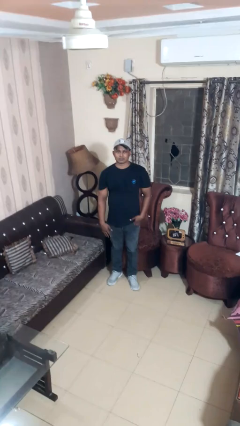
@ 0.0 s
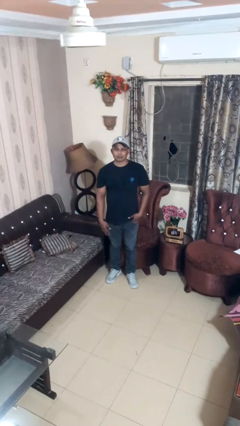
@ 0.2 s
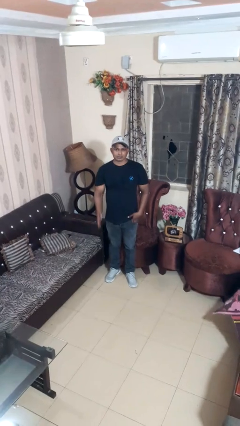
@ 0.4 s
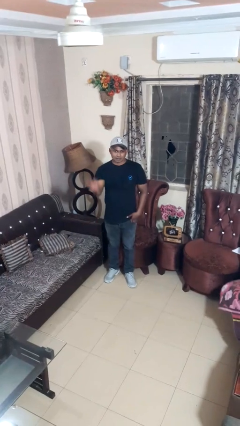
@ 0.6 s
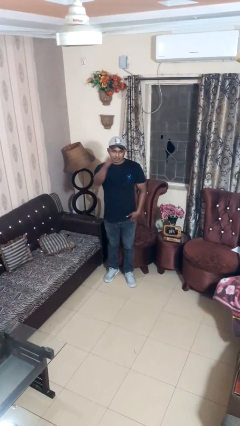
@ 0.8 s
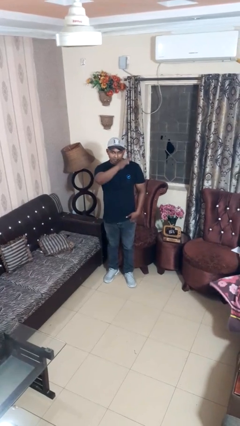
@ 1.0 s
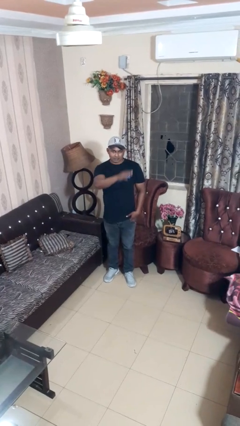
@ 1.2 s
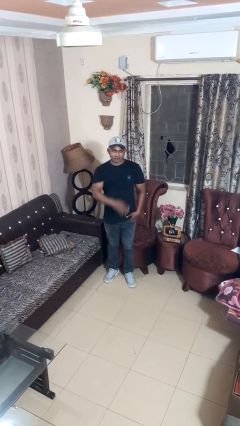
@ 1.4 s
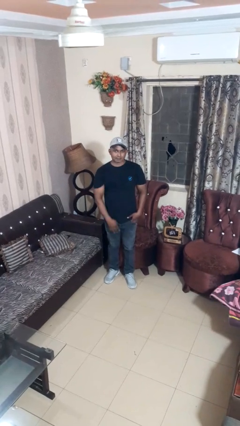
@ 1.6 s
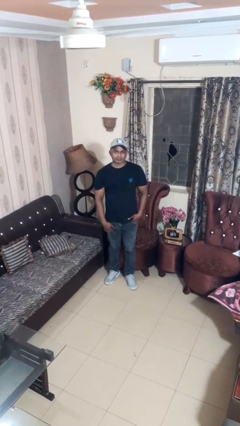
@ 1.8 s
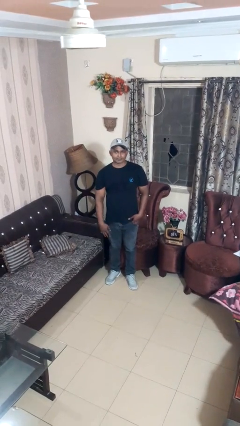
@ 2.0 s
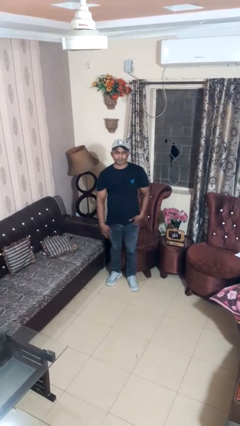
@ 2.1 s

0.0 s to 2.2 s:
person gestures swipe right

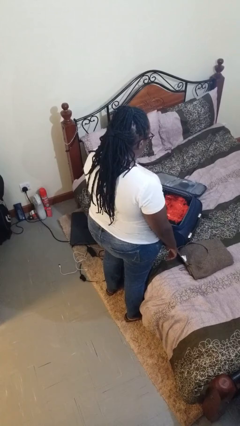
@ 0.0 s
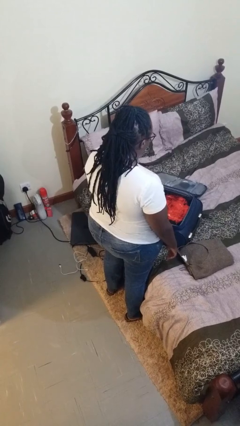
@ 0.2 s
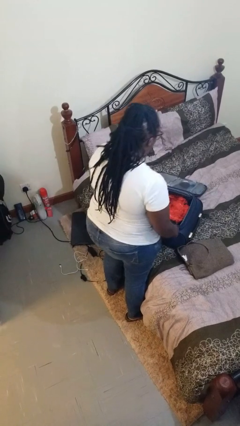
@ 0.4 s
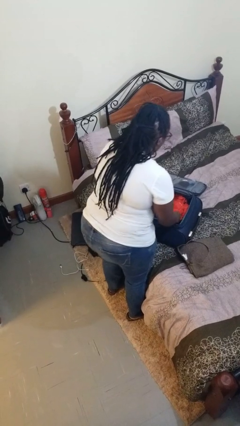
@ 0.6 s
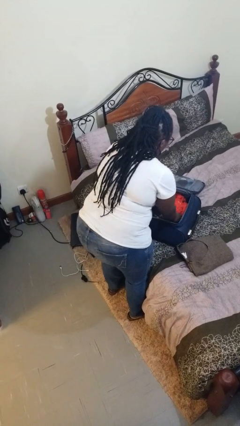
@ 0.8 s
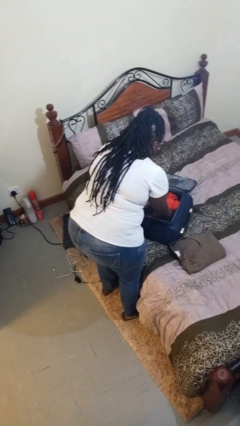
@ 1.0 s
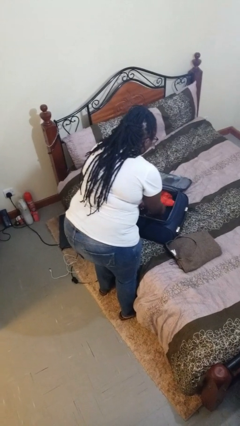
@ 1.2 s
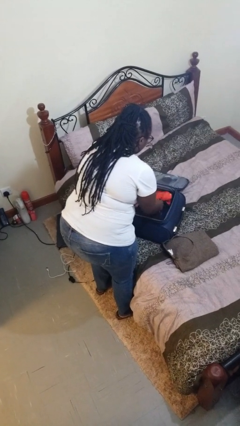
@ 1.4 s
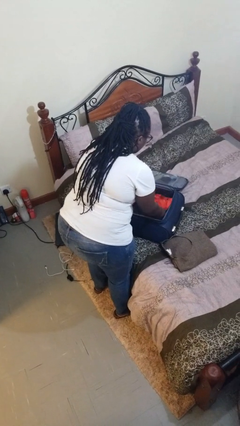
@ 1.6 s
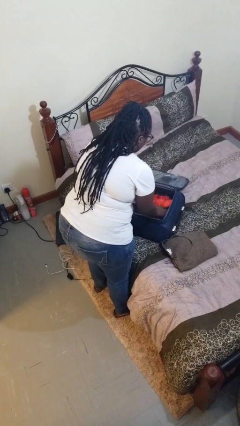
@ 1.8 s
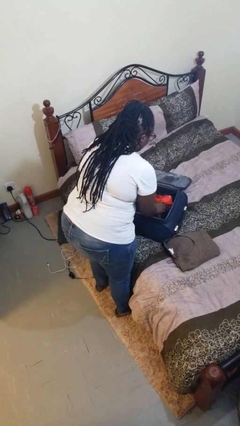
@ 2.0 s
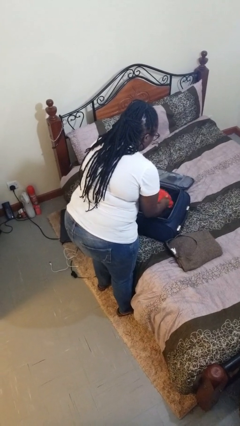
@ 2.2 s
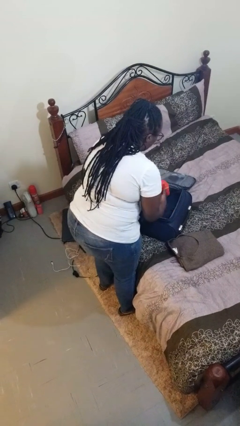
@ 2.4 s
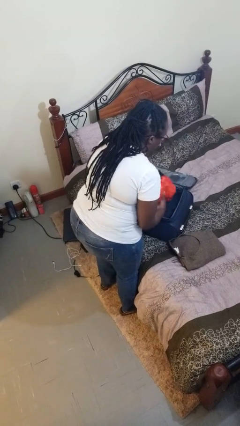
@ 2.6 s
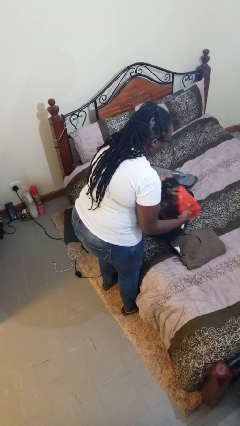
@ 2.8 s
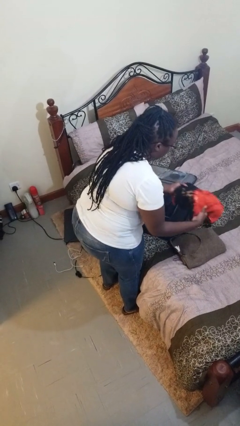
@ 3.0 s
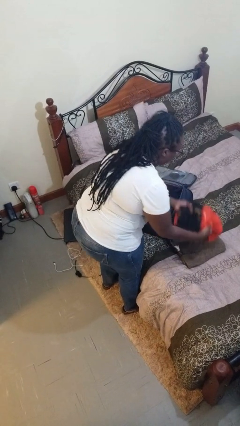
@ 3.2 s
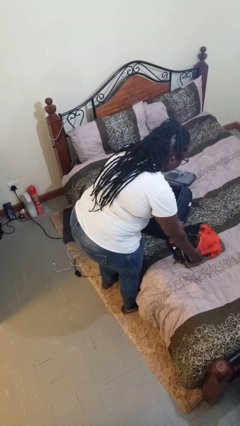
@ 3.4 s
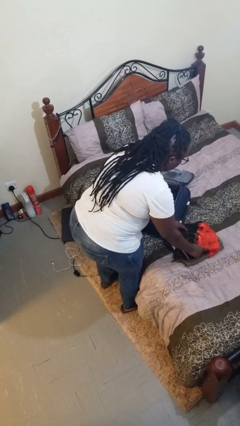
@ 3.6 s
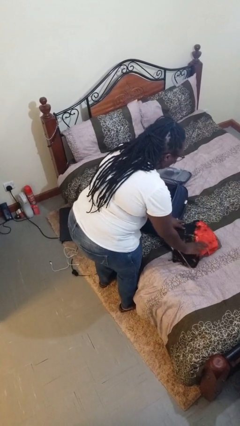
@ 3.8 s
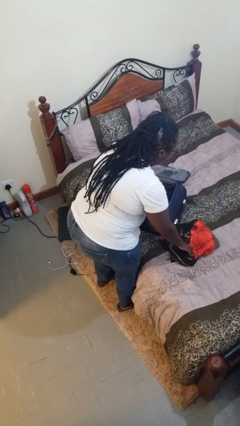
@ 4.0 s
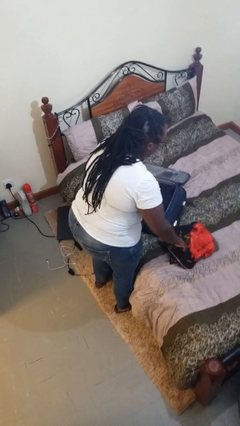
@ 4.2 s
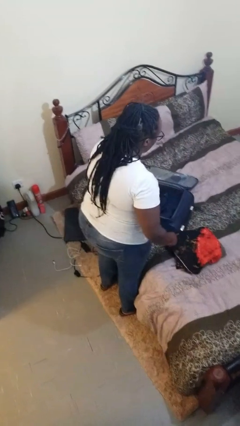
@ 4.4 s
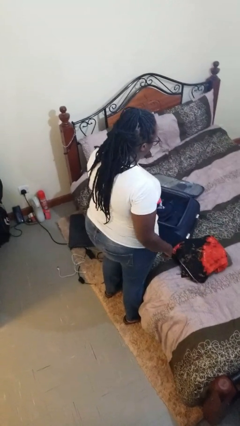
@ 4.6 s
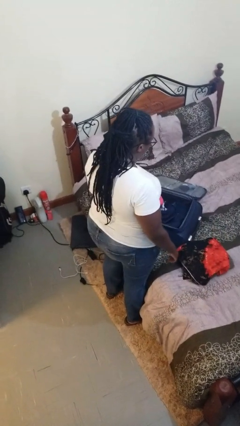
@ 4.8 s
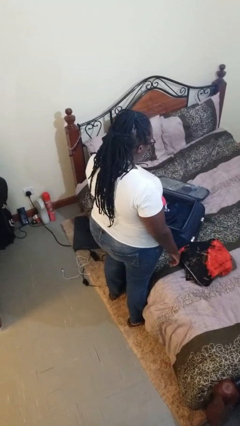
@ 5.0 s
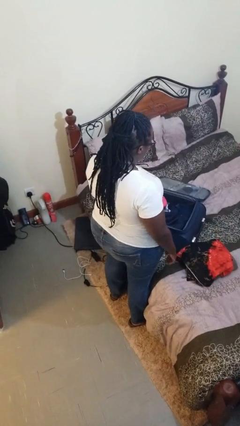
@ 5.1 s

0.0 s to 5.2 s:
person unloads clothes from suitcase

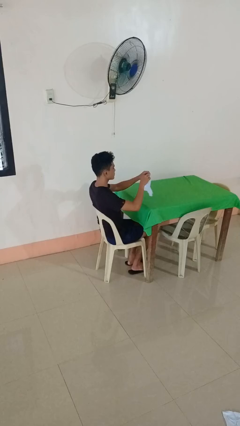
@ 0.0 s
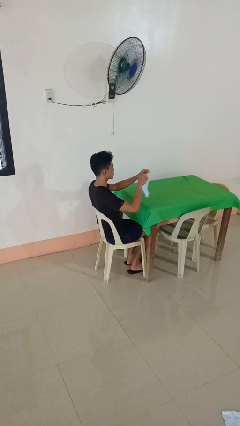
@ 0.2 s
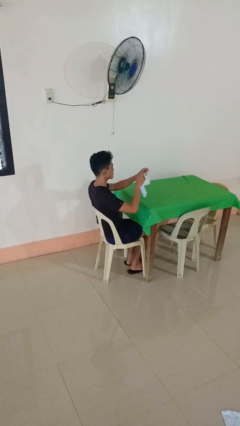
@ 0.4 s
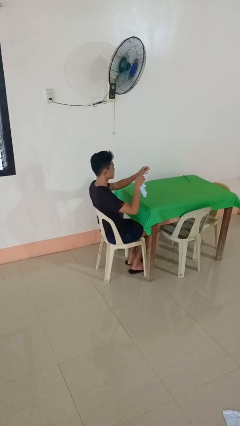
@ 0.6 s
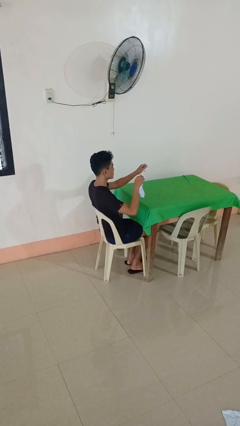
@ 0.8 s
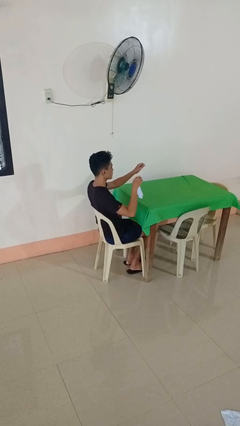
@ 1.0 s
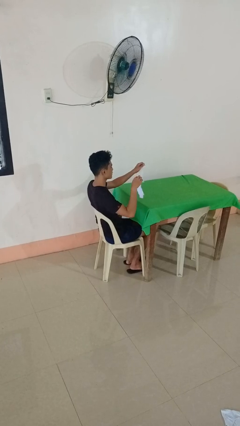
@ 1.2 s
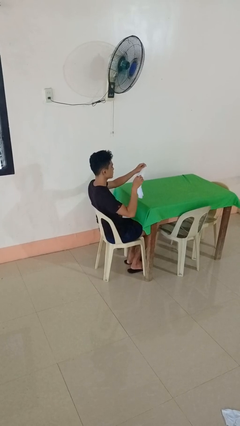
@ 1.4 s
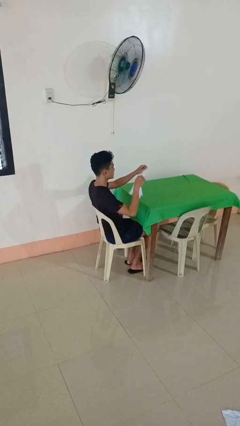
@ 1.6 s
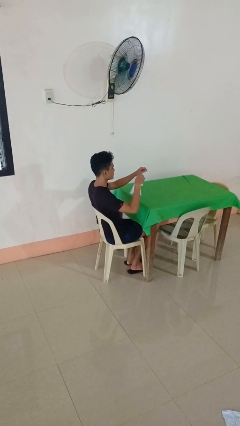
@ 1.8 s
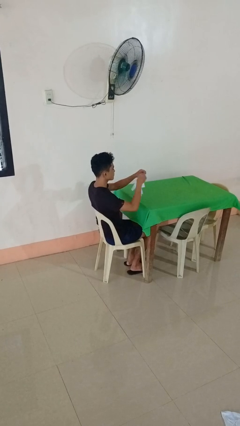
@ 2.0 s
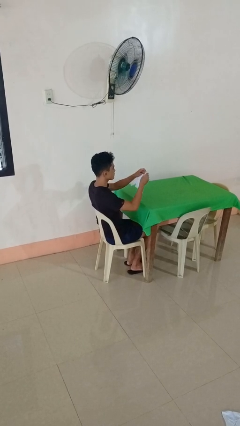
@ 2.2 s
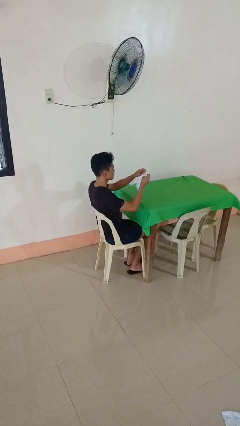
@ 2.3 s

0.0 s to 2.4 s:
person tears paper

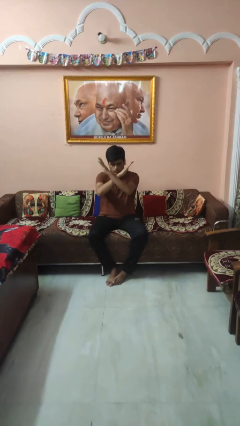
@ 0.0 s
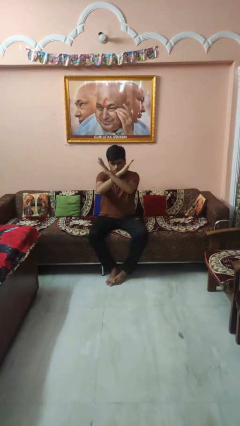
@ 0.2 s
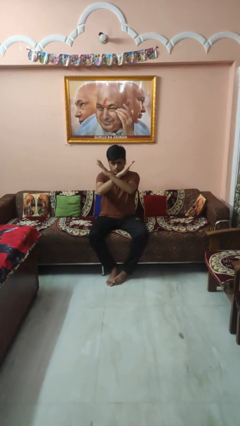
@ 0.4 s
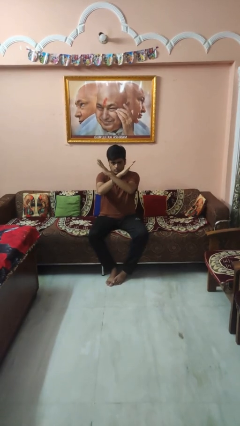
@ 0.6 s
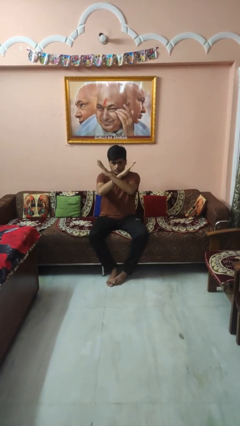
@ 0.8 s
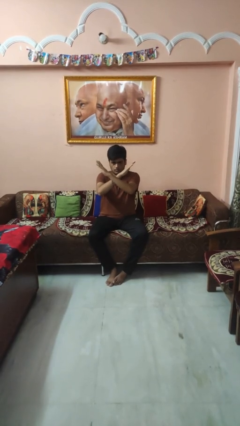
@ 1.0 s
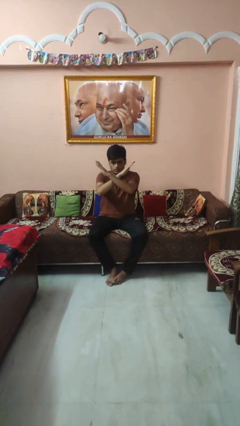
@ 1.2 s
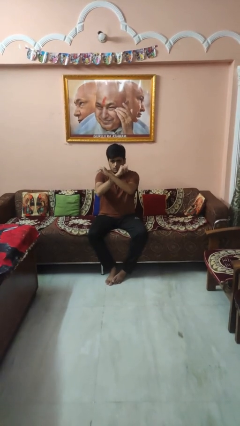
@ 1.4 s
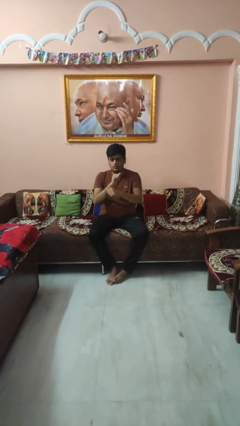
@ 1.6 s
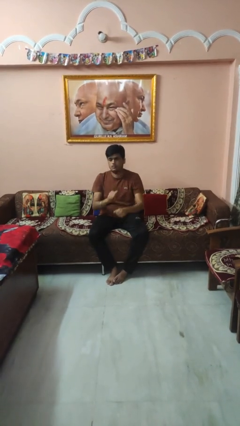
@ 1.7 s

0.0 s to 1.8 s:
person gestures arms x

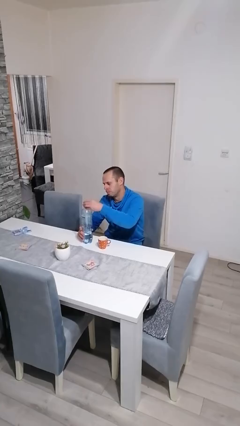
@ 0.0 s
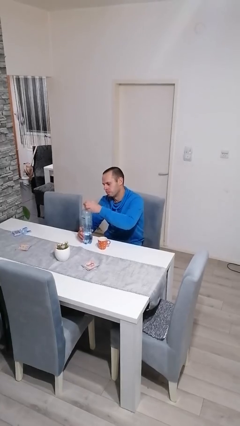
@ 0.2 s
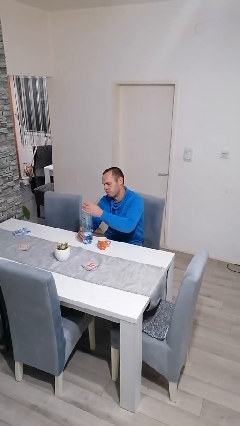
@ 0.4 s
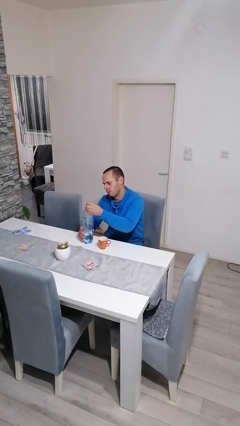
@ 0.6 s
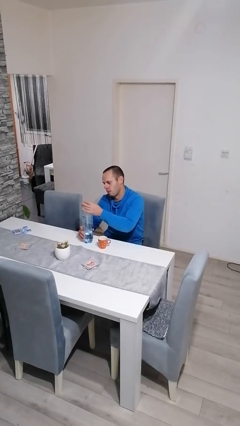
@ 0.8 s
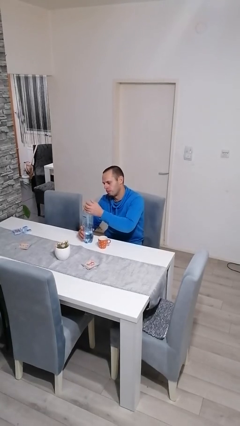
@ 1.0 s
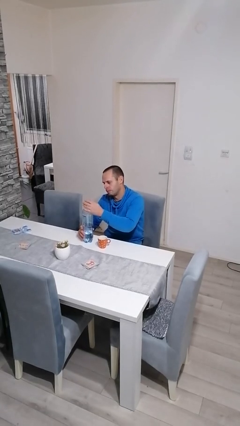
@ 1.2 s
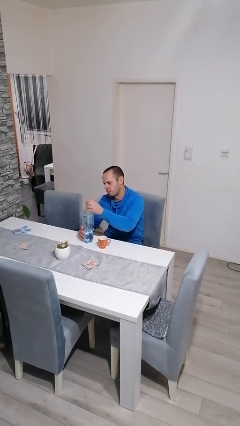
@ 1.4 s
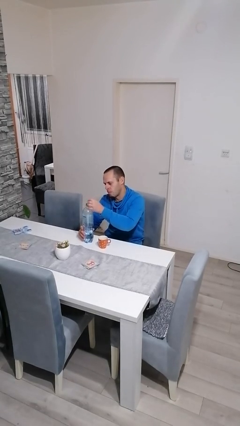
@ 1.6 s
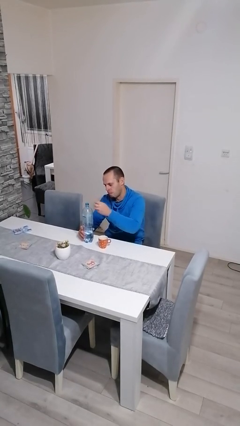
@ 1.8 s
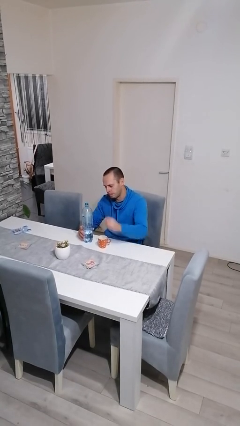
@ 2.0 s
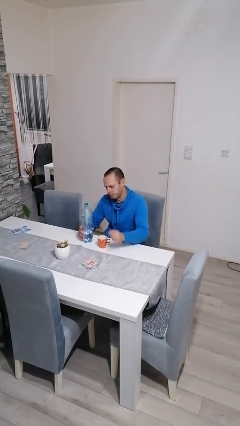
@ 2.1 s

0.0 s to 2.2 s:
person unscrews lid from bottle

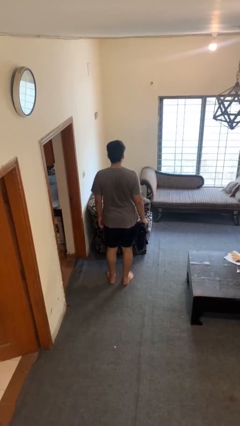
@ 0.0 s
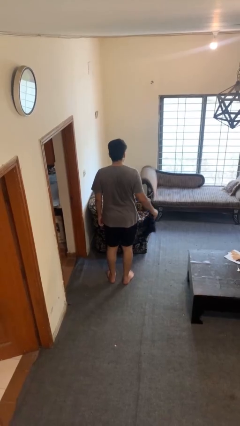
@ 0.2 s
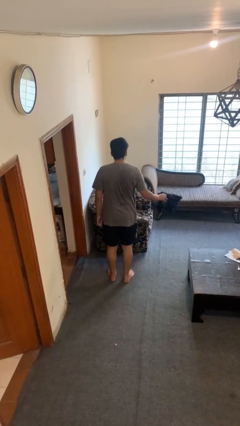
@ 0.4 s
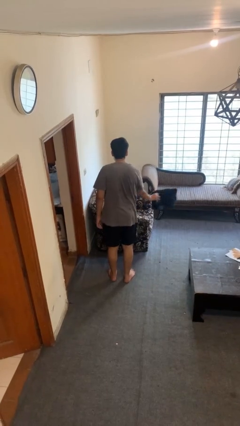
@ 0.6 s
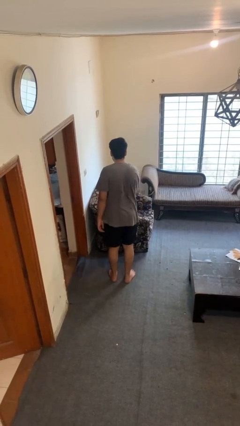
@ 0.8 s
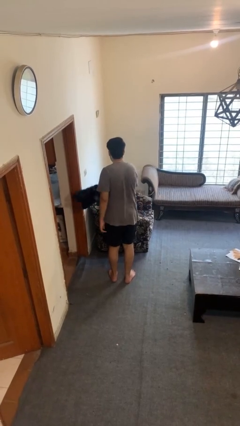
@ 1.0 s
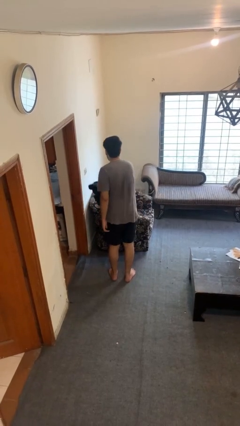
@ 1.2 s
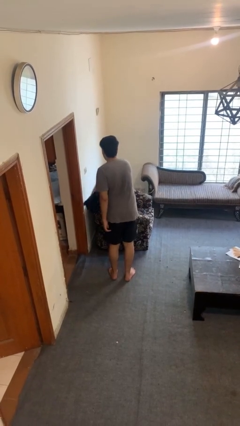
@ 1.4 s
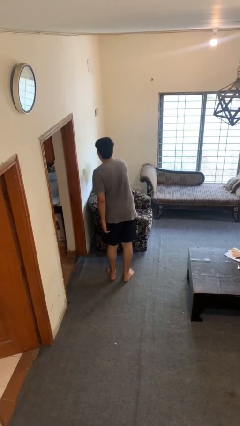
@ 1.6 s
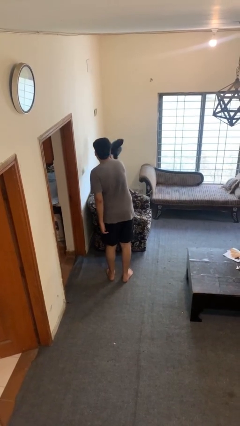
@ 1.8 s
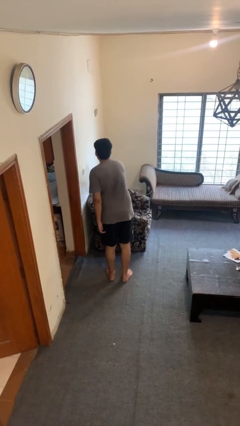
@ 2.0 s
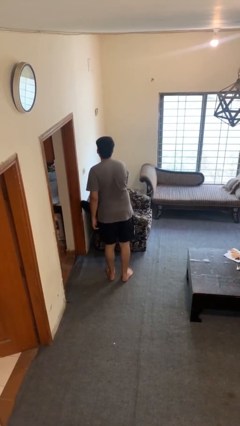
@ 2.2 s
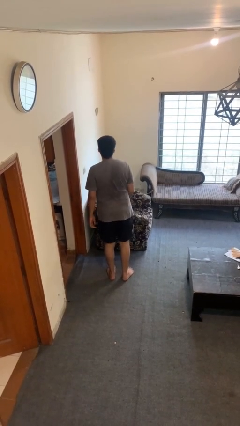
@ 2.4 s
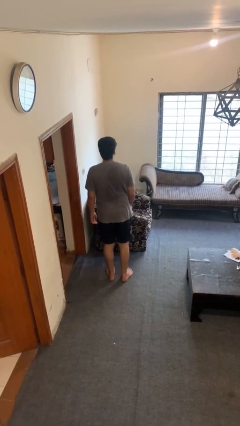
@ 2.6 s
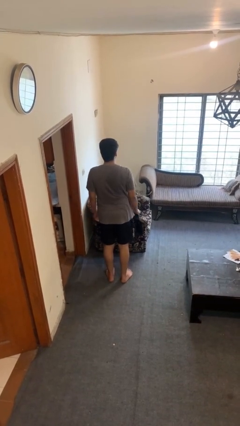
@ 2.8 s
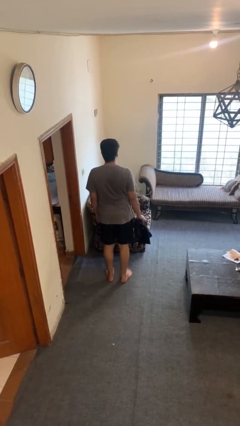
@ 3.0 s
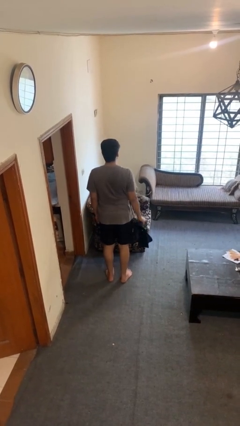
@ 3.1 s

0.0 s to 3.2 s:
person dusts furniture
